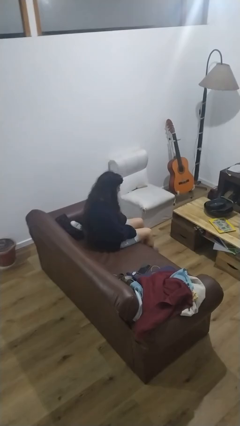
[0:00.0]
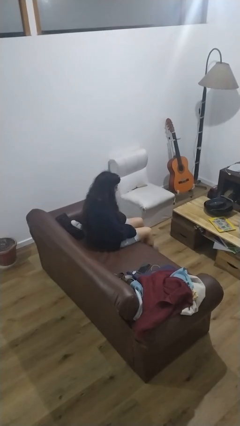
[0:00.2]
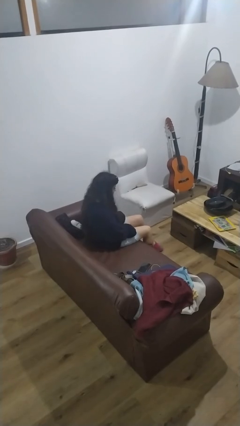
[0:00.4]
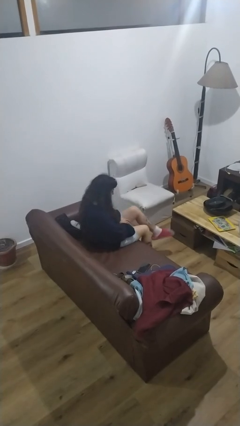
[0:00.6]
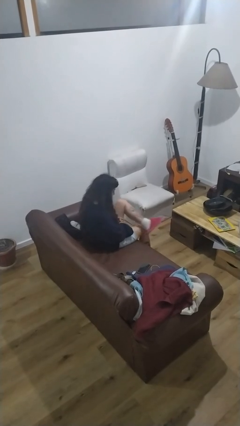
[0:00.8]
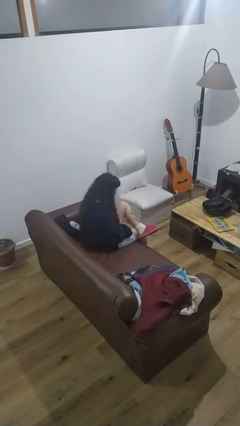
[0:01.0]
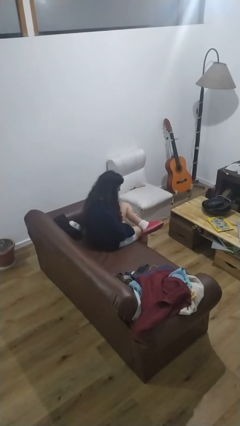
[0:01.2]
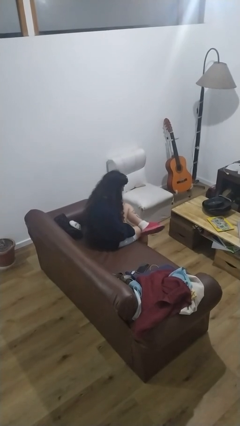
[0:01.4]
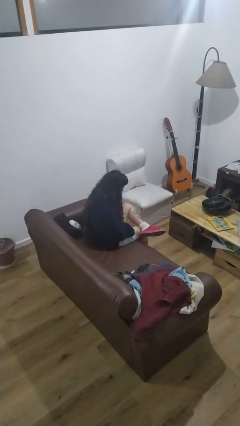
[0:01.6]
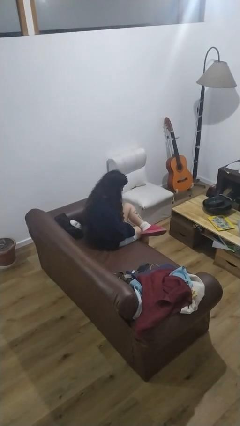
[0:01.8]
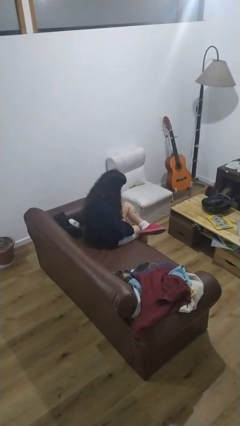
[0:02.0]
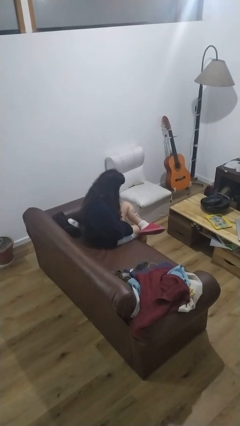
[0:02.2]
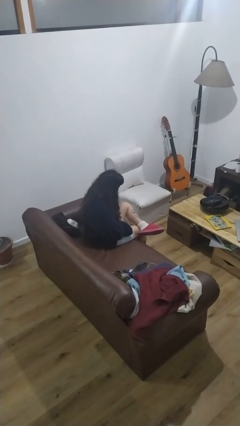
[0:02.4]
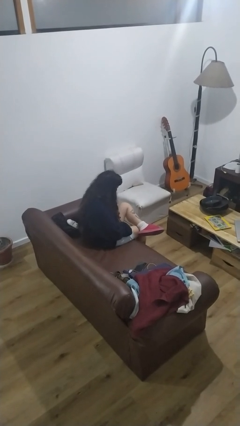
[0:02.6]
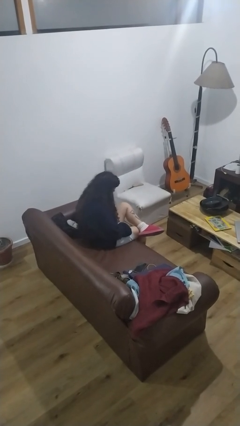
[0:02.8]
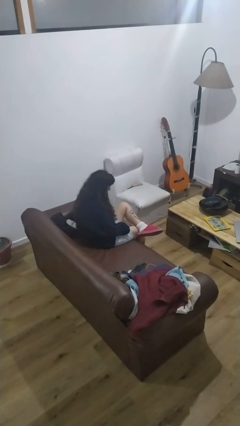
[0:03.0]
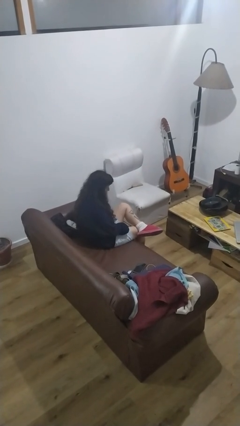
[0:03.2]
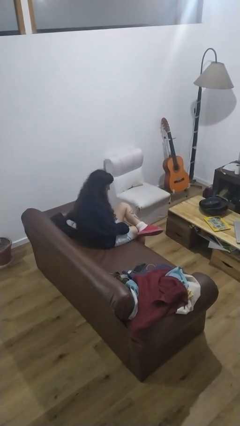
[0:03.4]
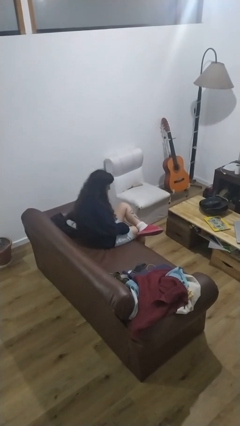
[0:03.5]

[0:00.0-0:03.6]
person crosses legs

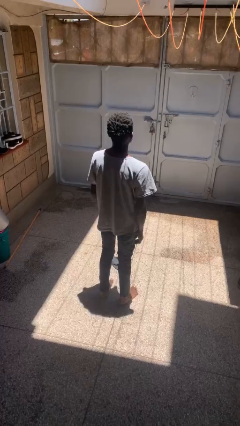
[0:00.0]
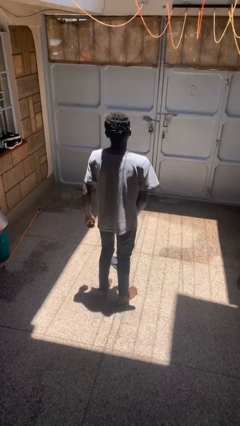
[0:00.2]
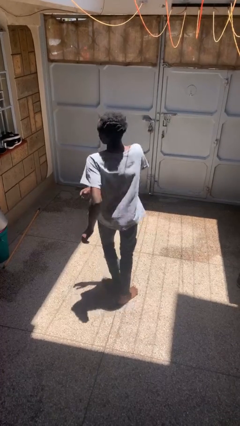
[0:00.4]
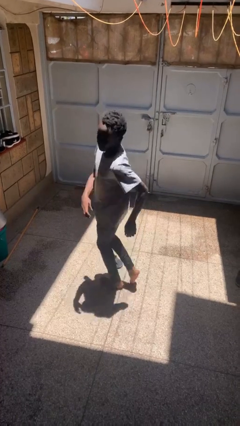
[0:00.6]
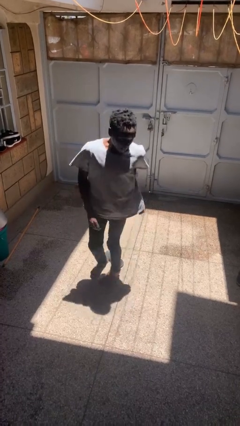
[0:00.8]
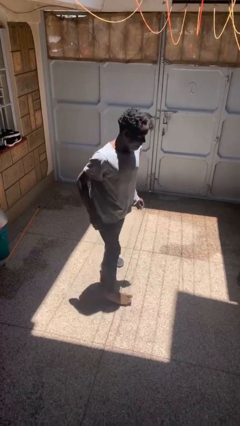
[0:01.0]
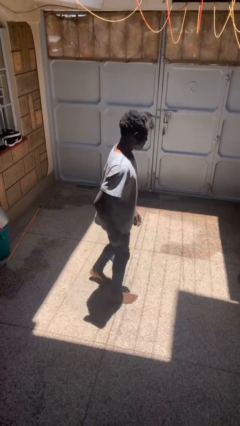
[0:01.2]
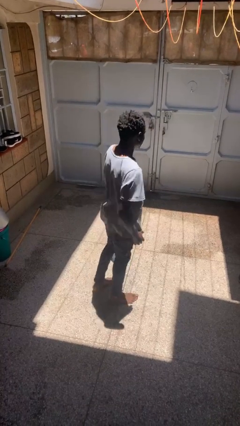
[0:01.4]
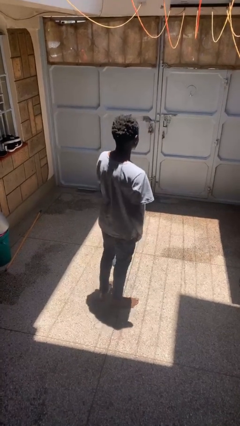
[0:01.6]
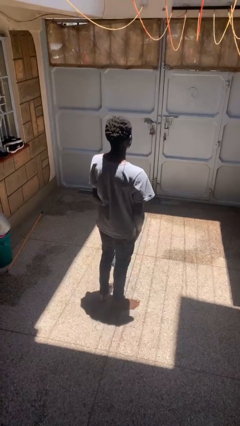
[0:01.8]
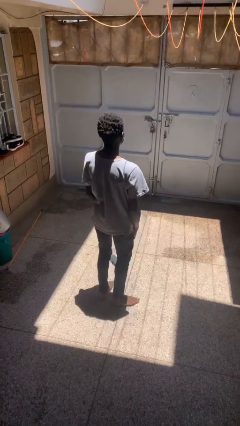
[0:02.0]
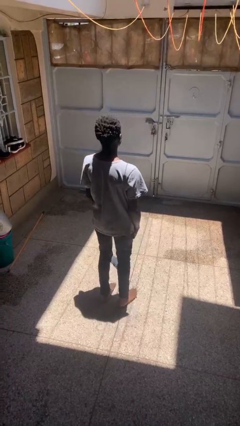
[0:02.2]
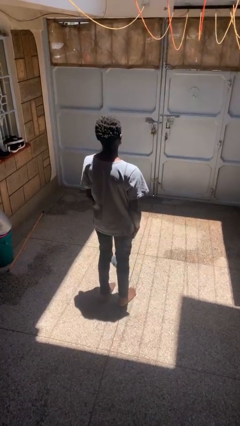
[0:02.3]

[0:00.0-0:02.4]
person twirls

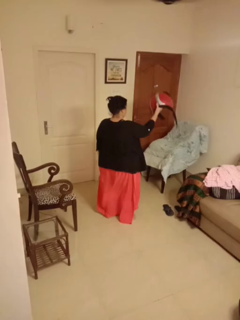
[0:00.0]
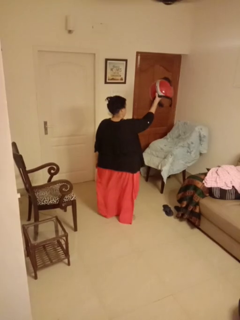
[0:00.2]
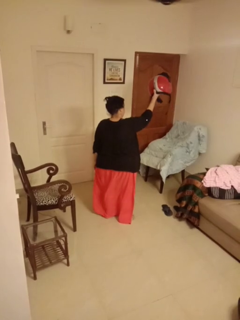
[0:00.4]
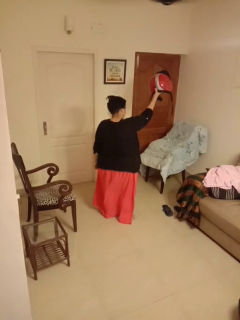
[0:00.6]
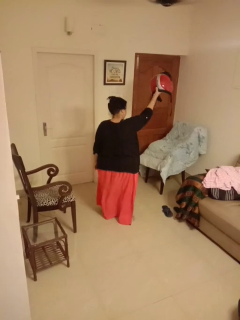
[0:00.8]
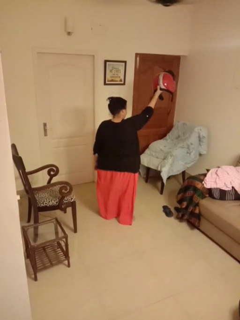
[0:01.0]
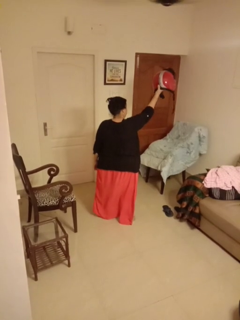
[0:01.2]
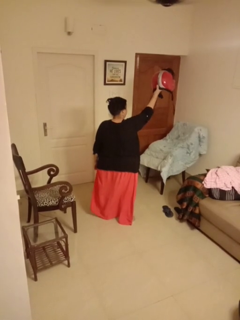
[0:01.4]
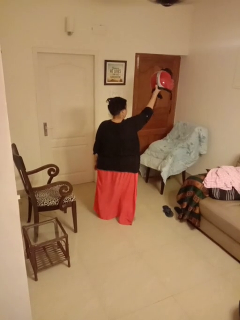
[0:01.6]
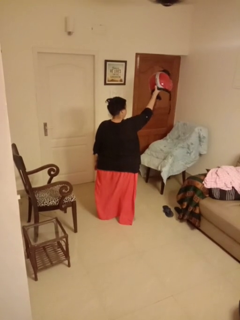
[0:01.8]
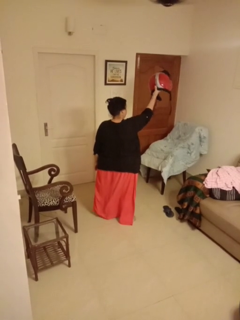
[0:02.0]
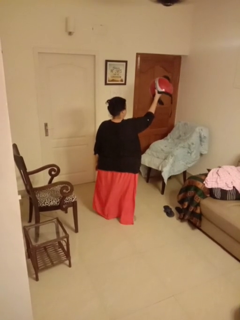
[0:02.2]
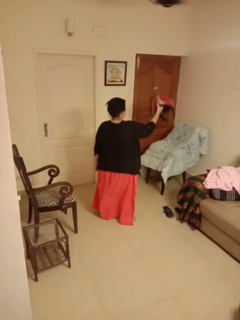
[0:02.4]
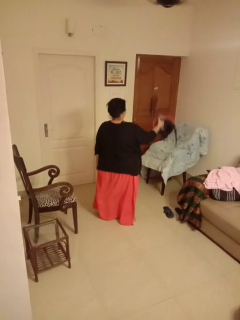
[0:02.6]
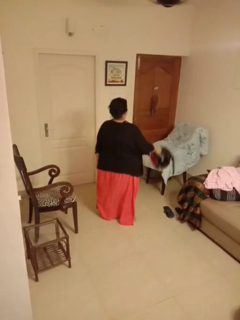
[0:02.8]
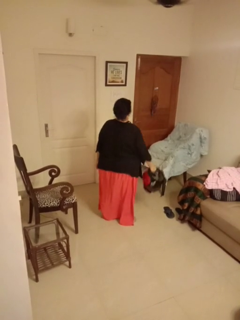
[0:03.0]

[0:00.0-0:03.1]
person holds object above head

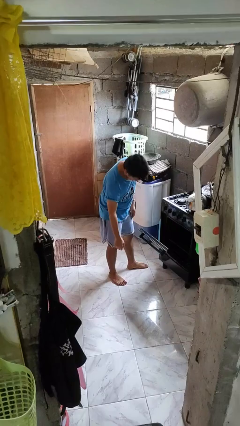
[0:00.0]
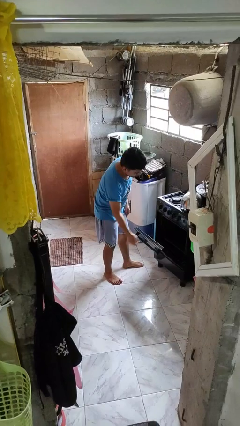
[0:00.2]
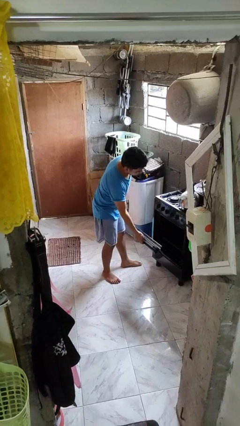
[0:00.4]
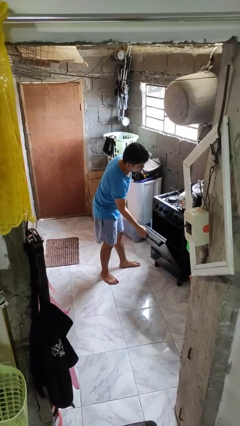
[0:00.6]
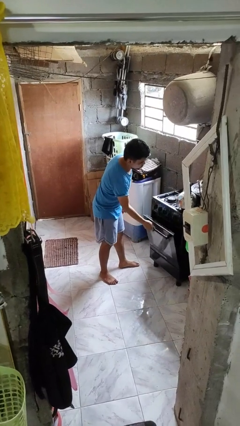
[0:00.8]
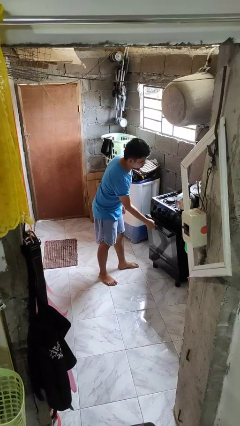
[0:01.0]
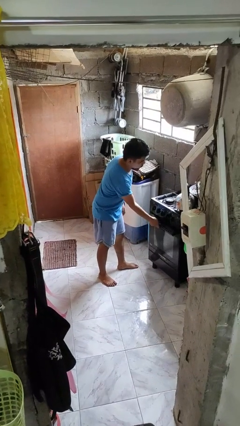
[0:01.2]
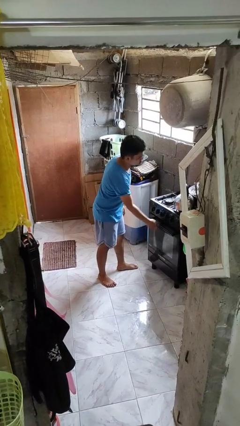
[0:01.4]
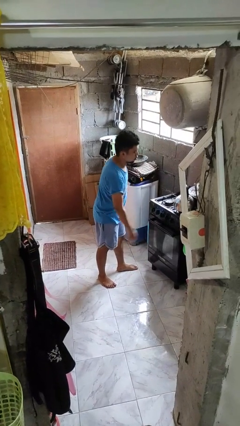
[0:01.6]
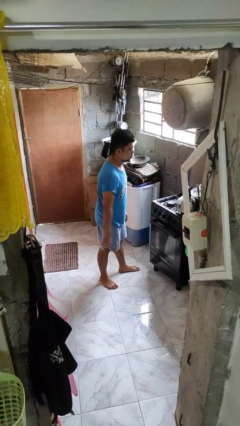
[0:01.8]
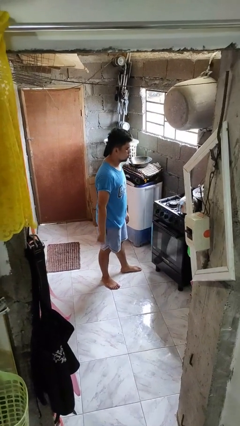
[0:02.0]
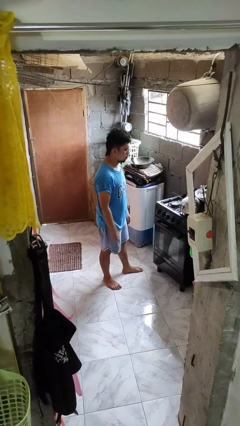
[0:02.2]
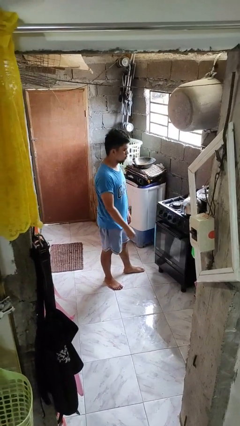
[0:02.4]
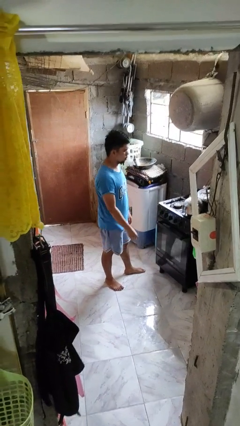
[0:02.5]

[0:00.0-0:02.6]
person closes oven door

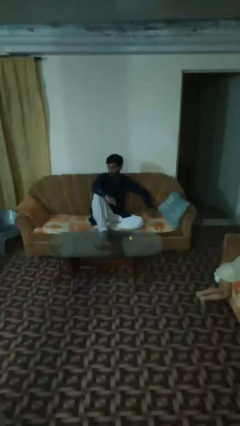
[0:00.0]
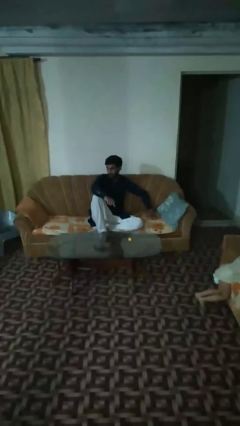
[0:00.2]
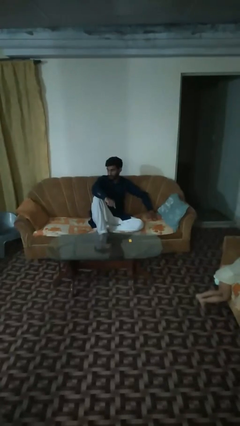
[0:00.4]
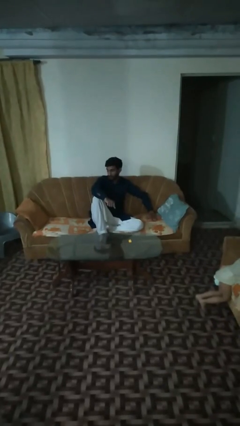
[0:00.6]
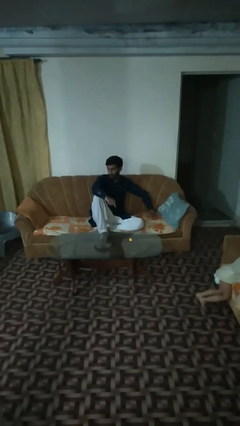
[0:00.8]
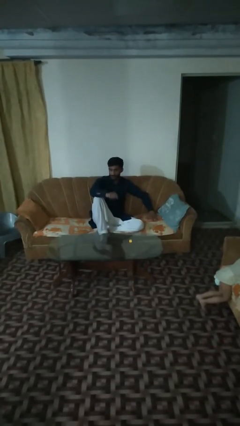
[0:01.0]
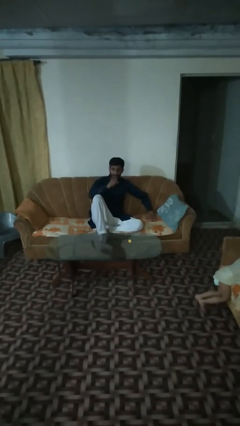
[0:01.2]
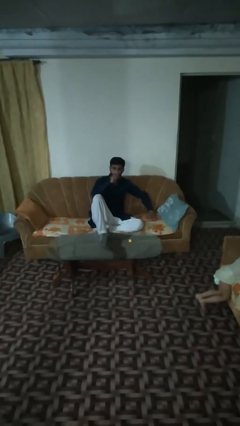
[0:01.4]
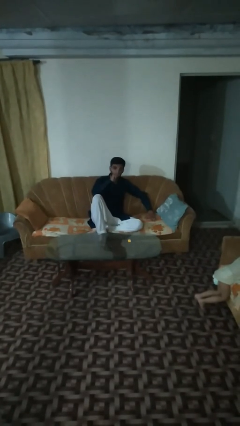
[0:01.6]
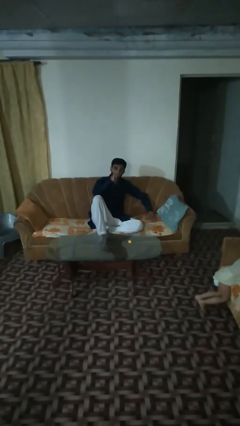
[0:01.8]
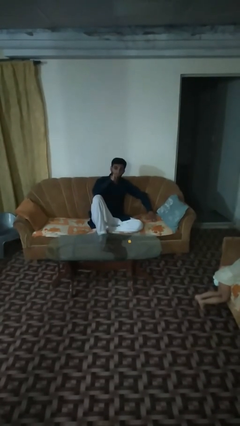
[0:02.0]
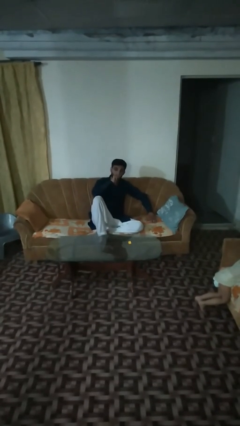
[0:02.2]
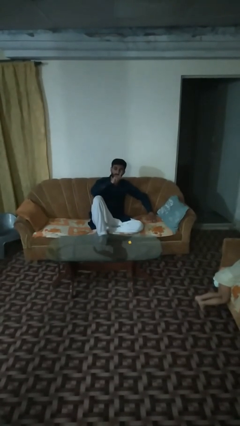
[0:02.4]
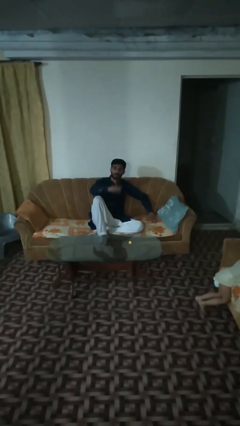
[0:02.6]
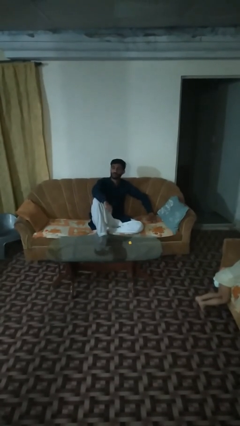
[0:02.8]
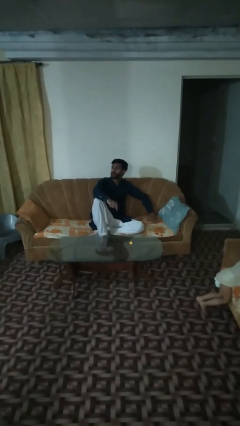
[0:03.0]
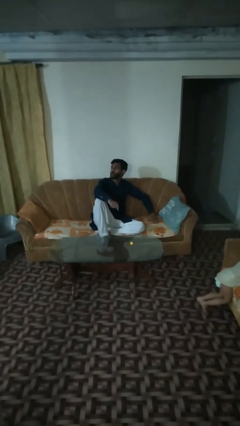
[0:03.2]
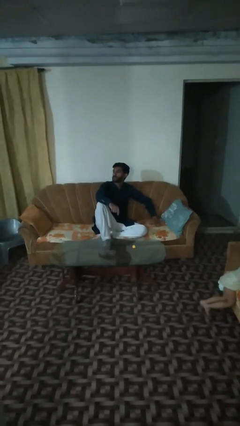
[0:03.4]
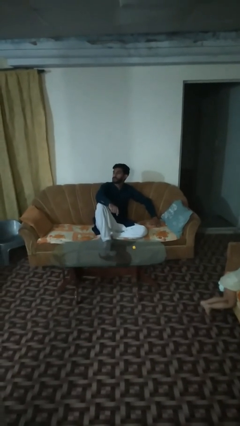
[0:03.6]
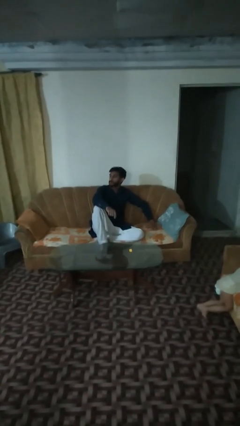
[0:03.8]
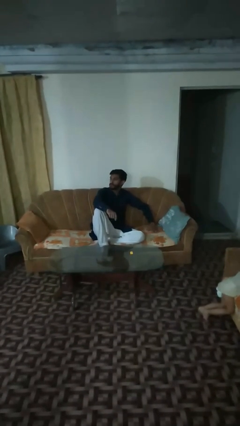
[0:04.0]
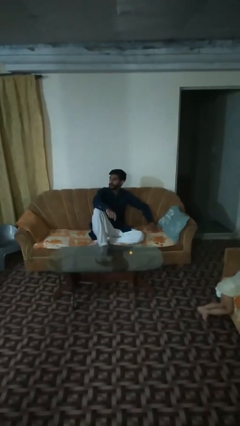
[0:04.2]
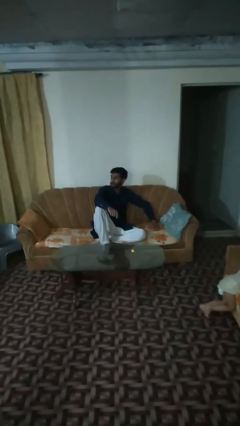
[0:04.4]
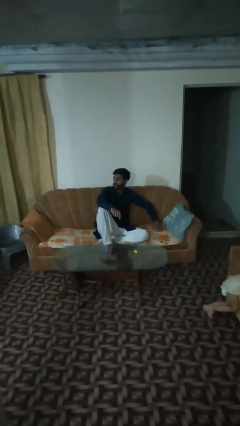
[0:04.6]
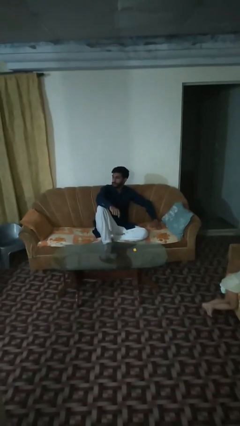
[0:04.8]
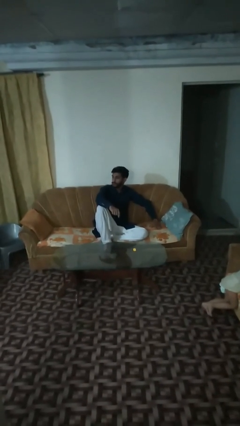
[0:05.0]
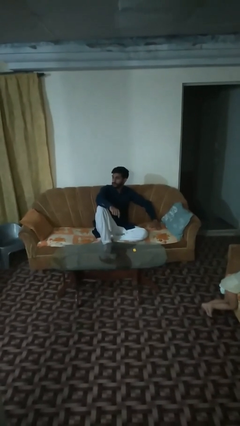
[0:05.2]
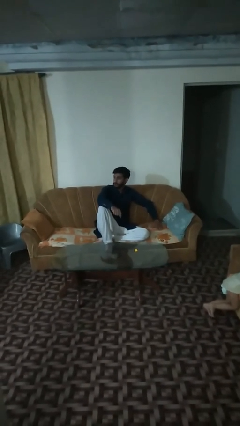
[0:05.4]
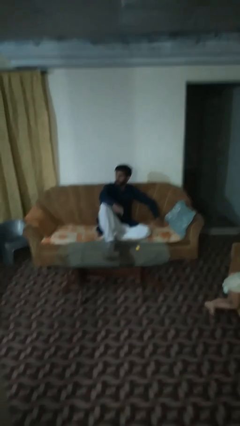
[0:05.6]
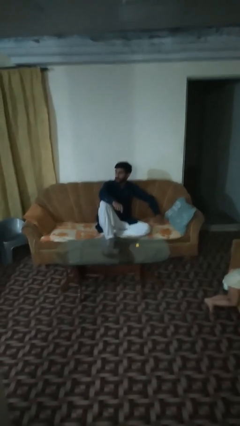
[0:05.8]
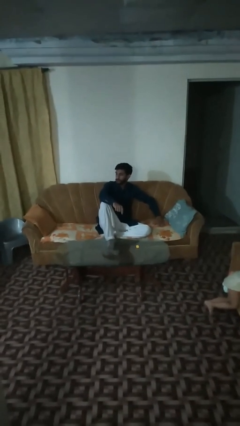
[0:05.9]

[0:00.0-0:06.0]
person vapes

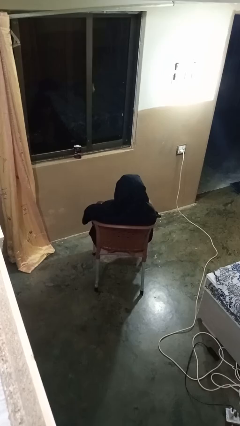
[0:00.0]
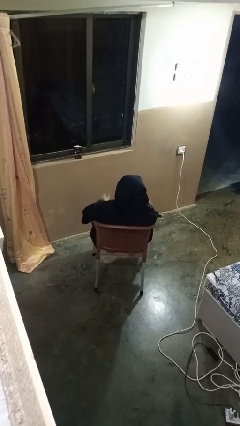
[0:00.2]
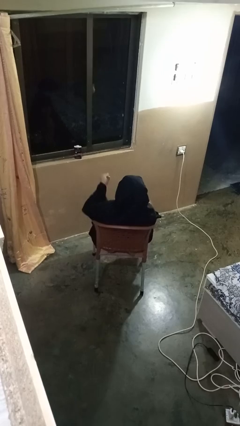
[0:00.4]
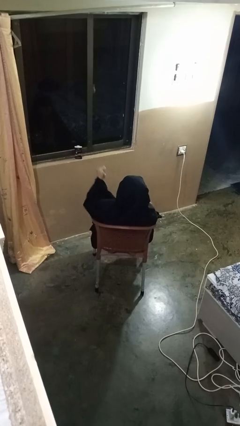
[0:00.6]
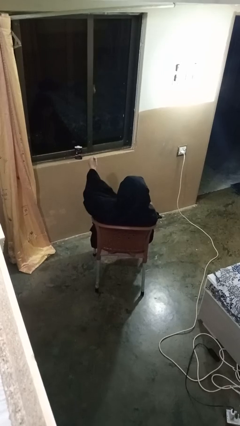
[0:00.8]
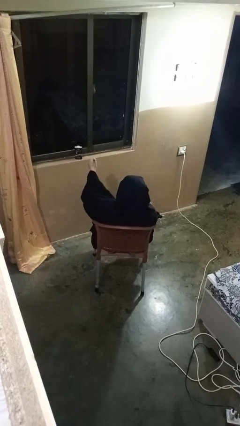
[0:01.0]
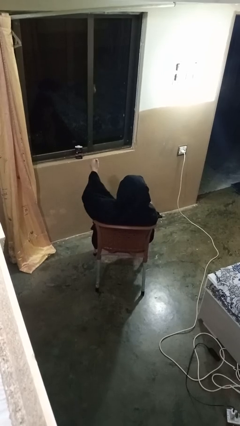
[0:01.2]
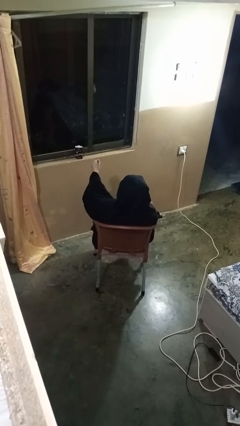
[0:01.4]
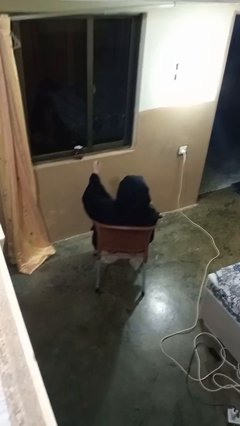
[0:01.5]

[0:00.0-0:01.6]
person gestures thumbs up